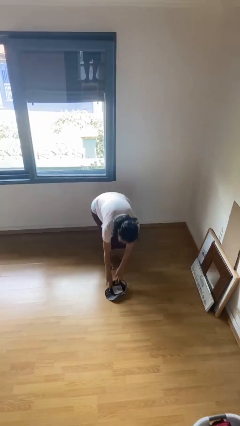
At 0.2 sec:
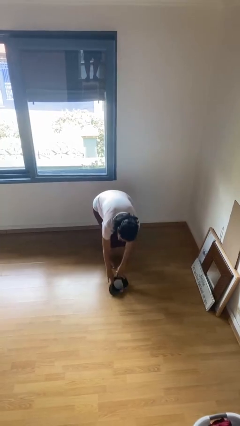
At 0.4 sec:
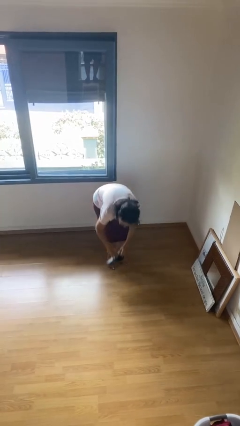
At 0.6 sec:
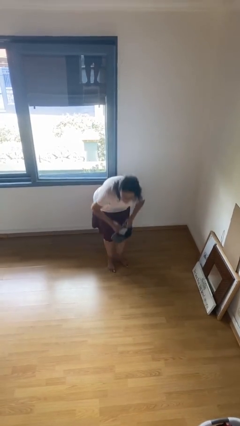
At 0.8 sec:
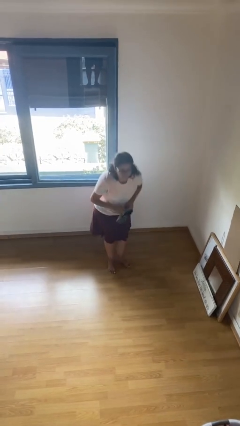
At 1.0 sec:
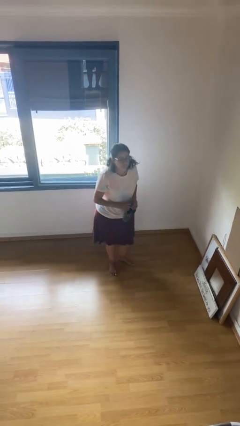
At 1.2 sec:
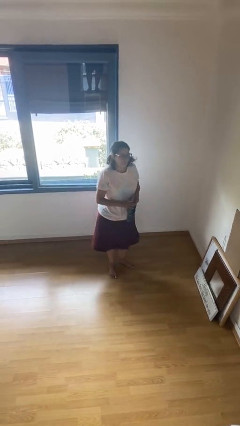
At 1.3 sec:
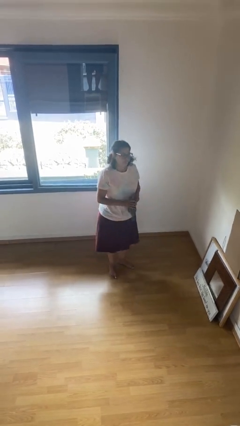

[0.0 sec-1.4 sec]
person picks up object from floor

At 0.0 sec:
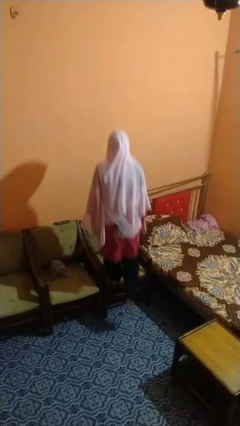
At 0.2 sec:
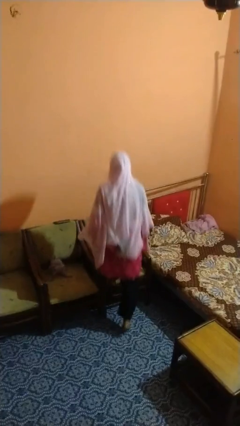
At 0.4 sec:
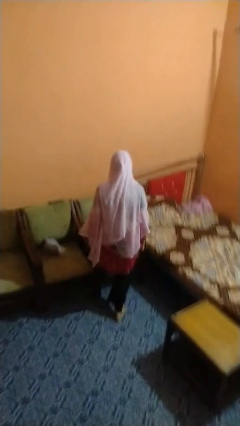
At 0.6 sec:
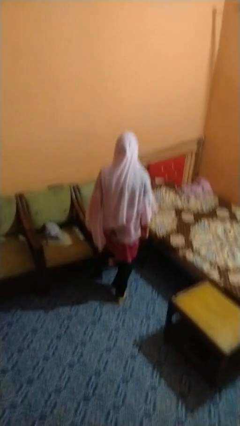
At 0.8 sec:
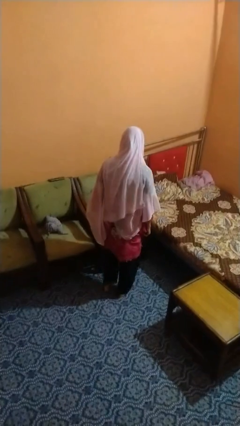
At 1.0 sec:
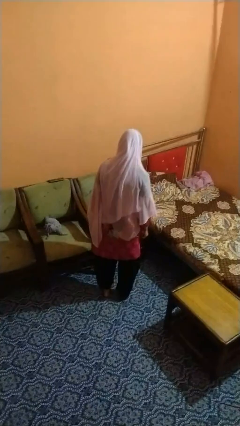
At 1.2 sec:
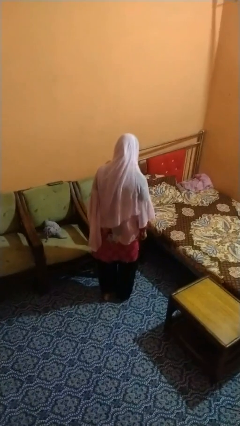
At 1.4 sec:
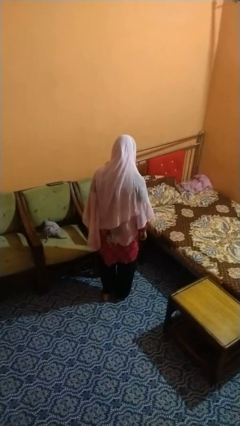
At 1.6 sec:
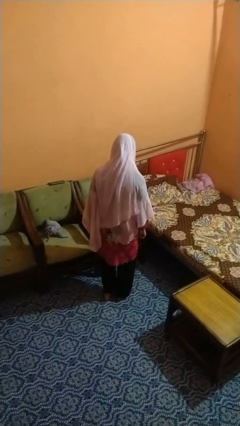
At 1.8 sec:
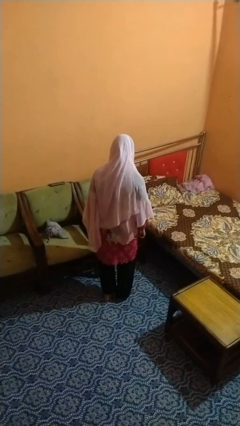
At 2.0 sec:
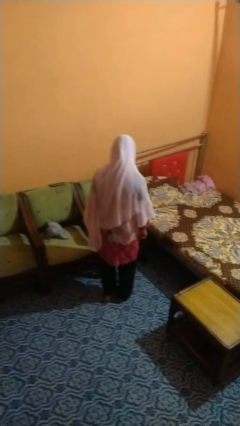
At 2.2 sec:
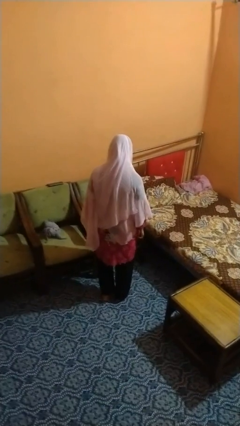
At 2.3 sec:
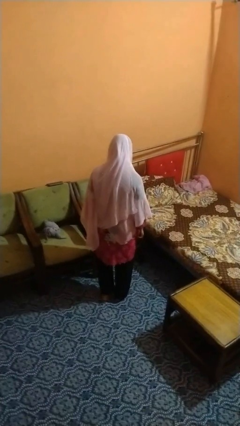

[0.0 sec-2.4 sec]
person climbs off chair

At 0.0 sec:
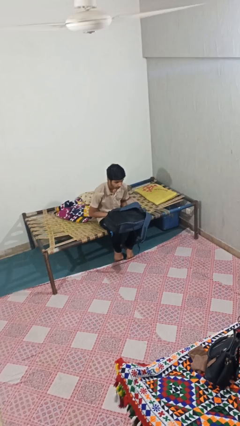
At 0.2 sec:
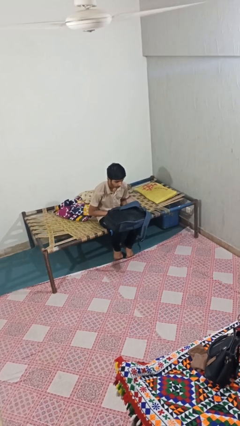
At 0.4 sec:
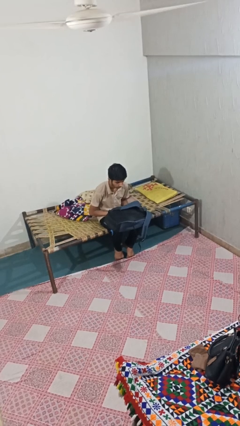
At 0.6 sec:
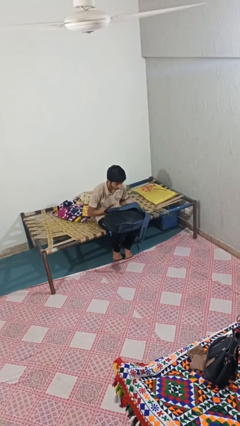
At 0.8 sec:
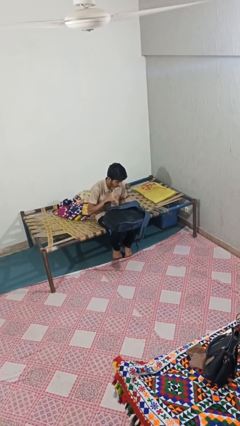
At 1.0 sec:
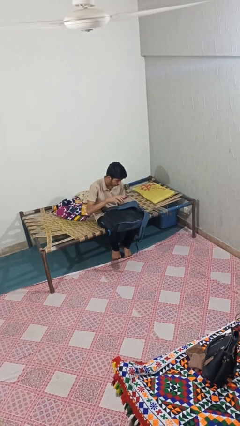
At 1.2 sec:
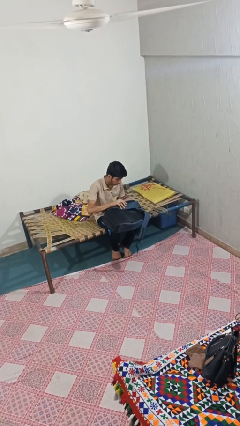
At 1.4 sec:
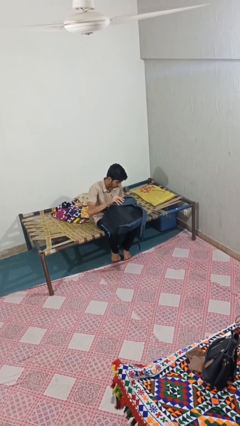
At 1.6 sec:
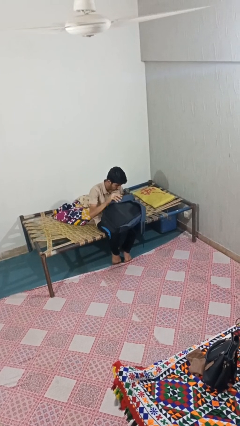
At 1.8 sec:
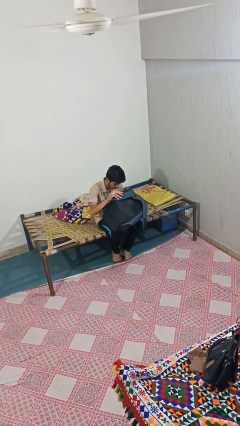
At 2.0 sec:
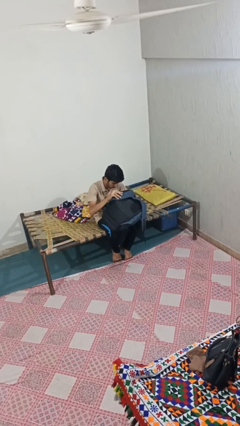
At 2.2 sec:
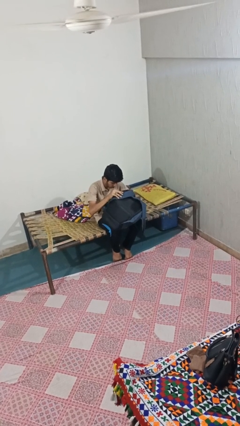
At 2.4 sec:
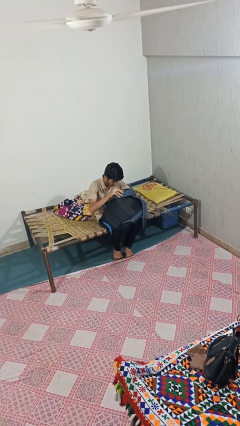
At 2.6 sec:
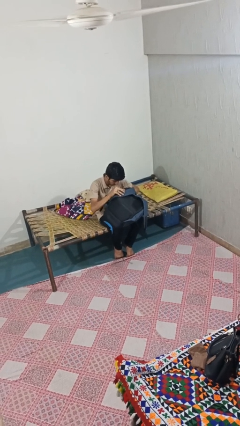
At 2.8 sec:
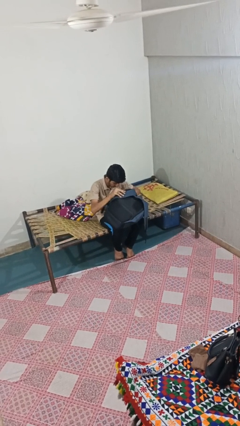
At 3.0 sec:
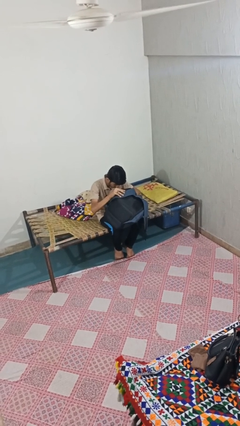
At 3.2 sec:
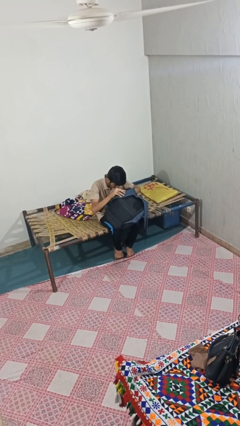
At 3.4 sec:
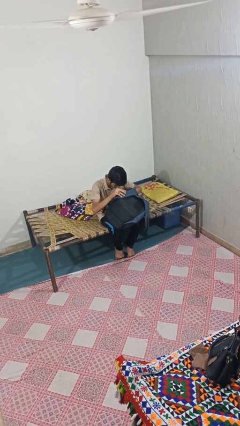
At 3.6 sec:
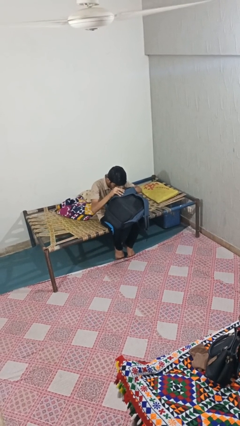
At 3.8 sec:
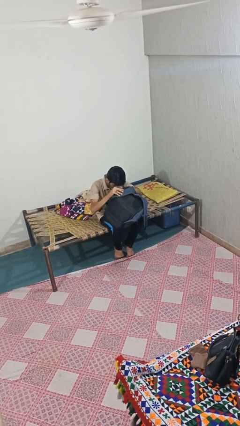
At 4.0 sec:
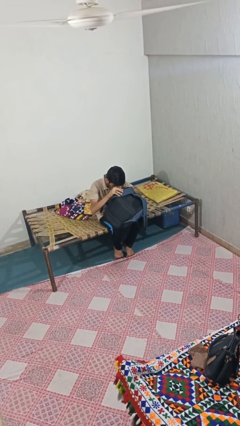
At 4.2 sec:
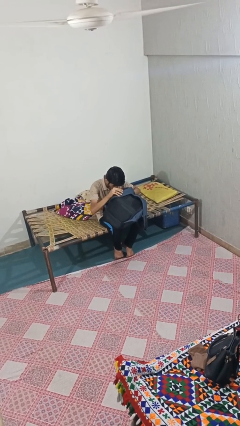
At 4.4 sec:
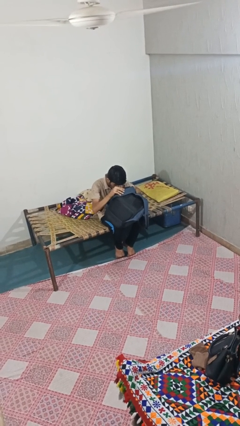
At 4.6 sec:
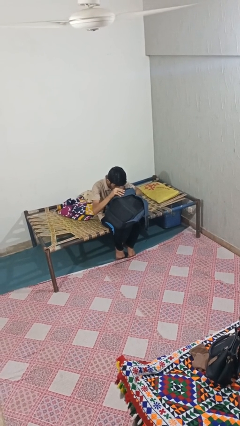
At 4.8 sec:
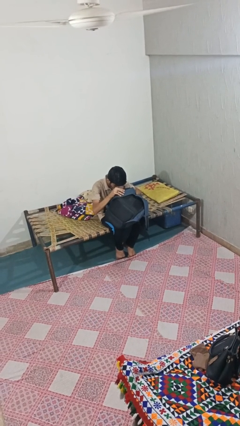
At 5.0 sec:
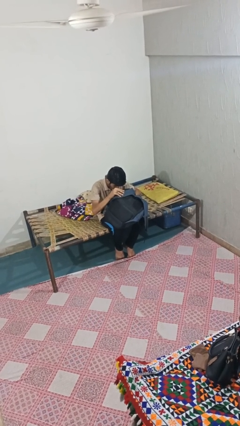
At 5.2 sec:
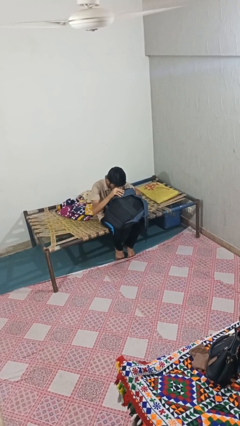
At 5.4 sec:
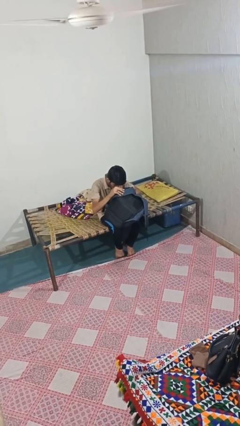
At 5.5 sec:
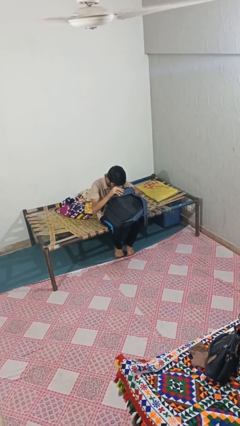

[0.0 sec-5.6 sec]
person searches in backpack

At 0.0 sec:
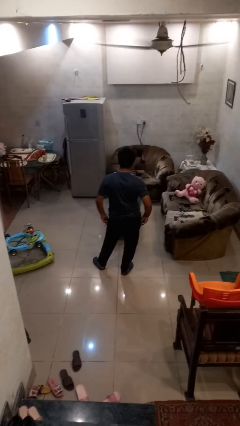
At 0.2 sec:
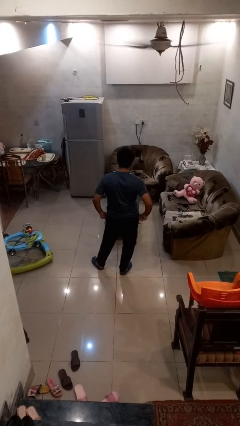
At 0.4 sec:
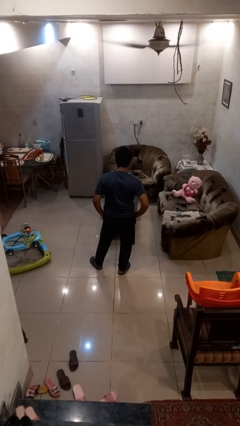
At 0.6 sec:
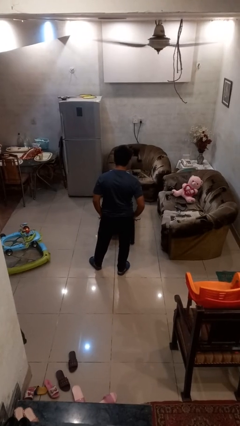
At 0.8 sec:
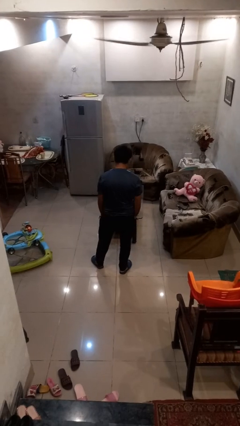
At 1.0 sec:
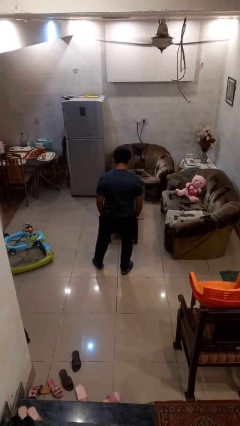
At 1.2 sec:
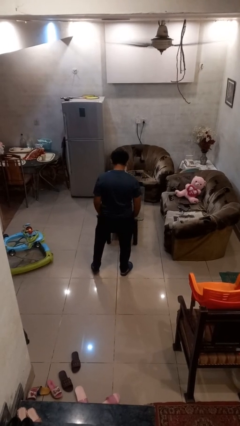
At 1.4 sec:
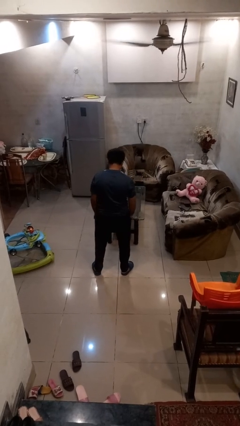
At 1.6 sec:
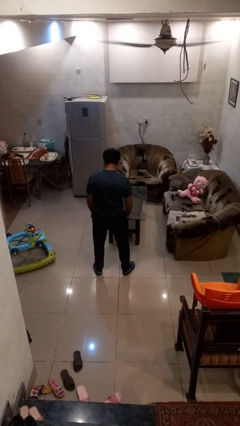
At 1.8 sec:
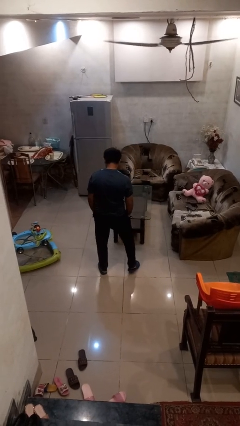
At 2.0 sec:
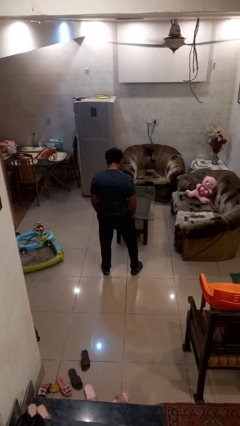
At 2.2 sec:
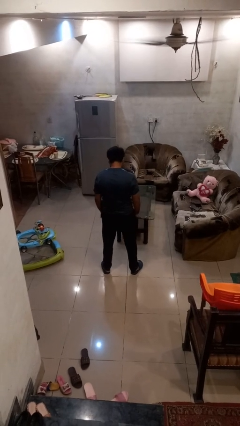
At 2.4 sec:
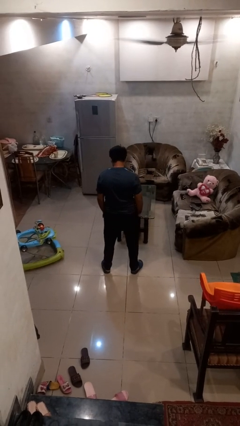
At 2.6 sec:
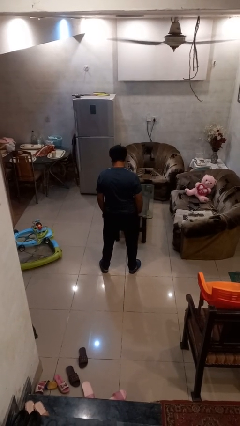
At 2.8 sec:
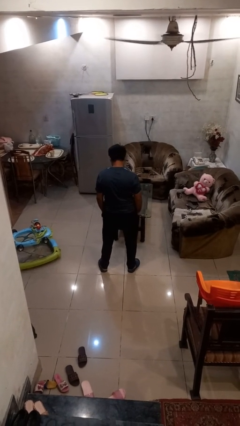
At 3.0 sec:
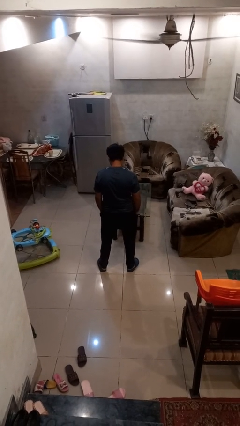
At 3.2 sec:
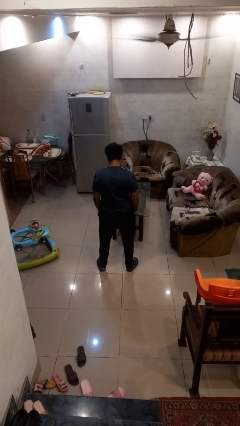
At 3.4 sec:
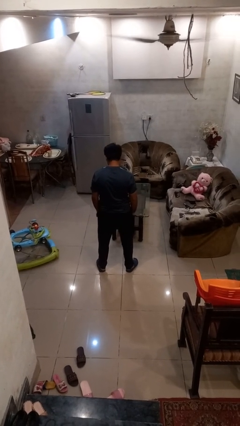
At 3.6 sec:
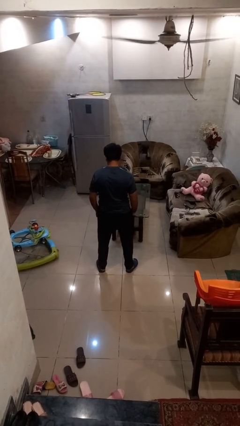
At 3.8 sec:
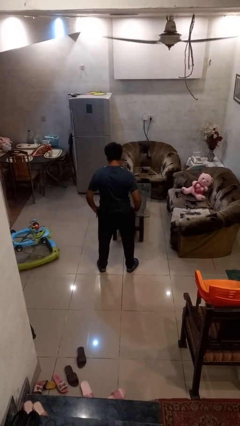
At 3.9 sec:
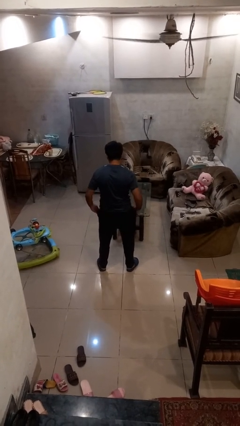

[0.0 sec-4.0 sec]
person puts hands in back pockets

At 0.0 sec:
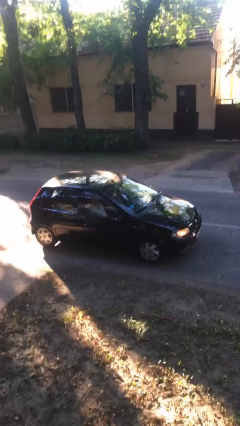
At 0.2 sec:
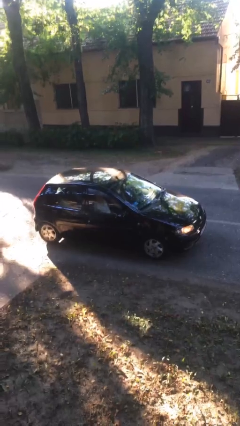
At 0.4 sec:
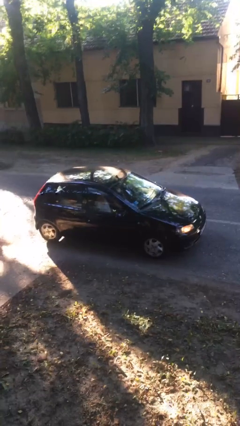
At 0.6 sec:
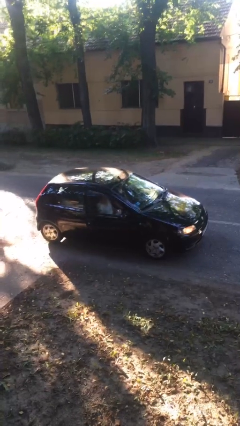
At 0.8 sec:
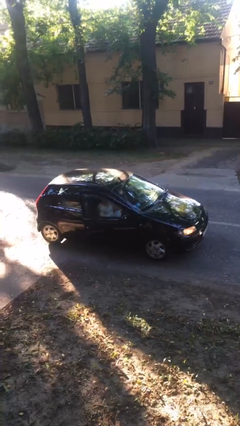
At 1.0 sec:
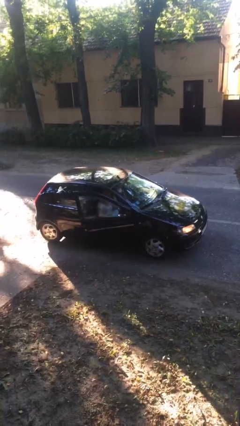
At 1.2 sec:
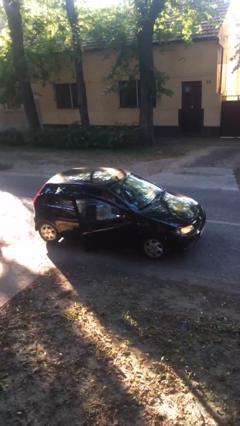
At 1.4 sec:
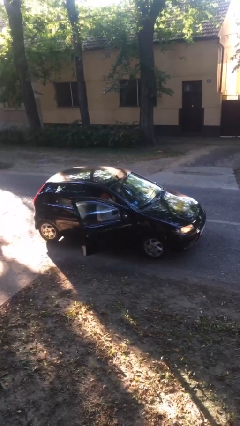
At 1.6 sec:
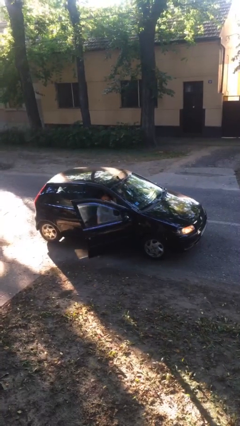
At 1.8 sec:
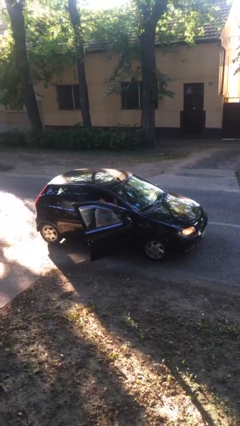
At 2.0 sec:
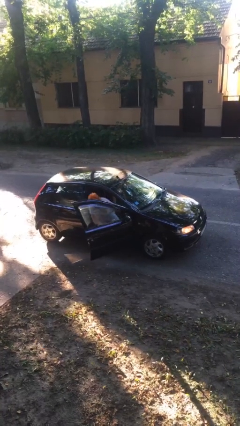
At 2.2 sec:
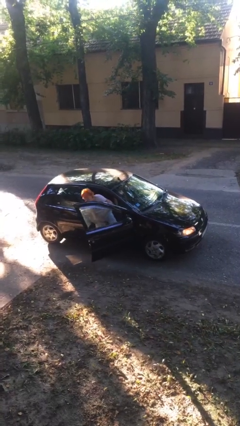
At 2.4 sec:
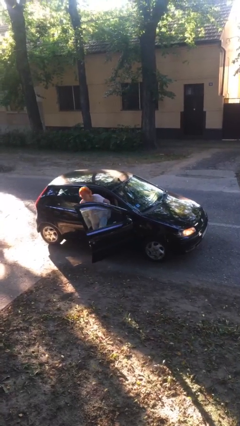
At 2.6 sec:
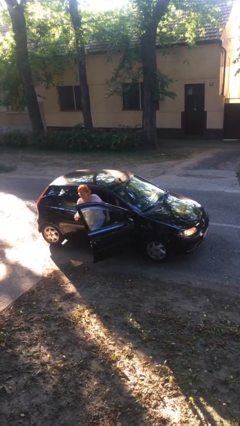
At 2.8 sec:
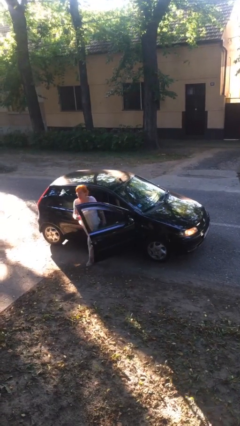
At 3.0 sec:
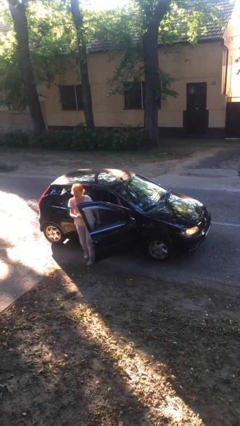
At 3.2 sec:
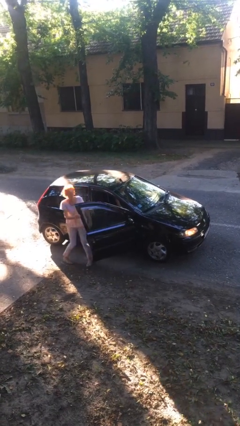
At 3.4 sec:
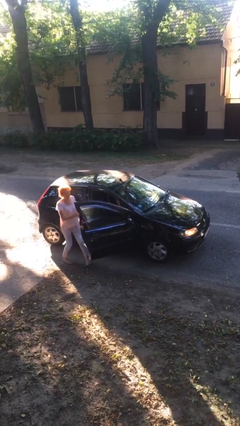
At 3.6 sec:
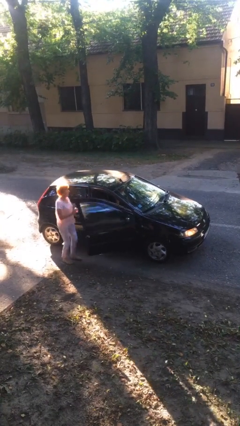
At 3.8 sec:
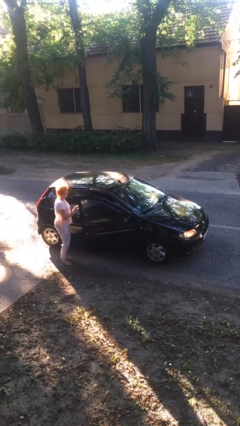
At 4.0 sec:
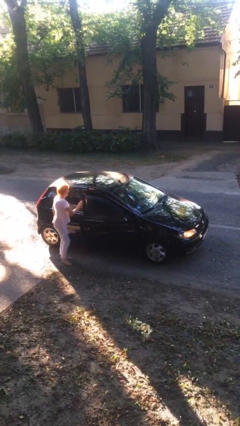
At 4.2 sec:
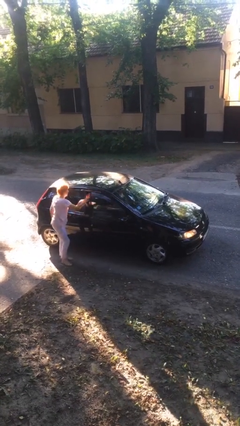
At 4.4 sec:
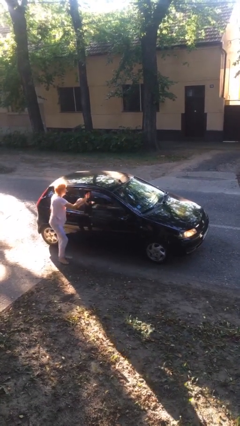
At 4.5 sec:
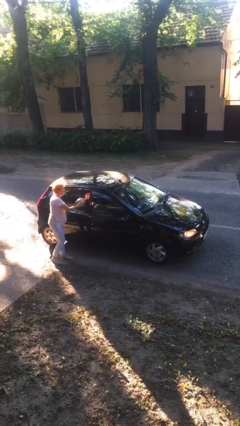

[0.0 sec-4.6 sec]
car drops off person
